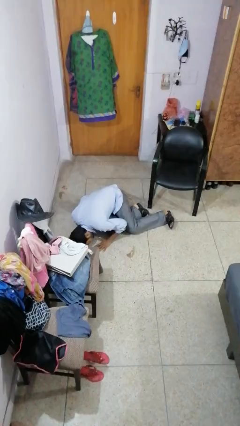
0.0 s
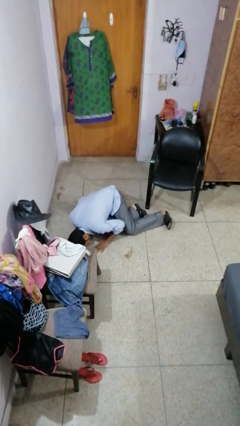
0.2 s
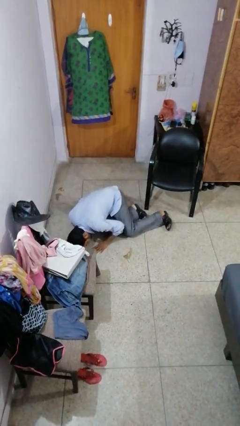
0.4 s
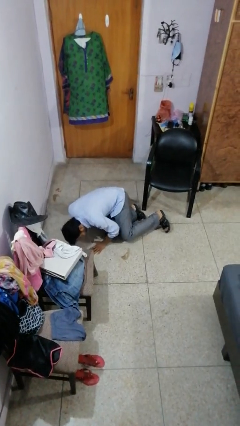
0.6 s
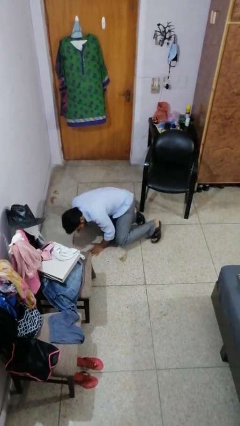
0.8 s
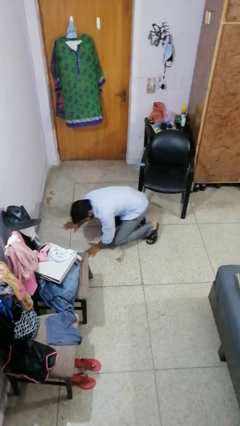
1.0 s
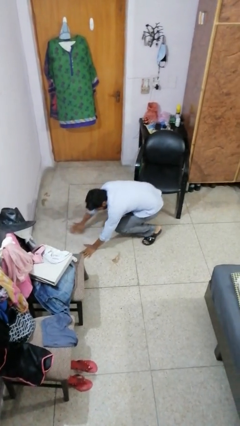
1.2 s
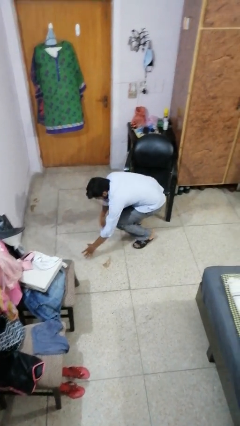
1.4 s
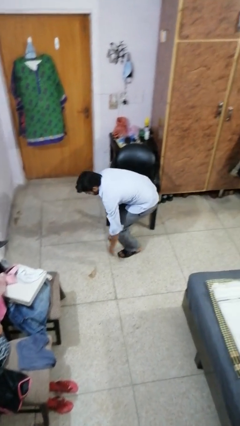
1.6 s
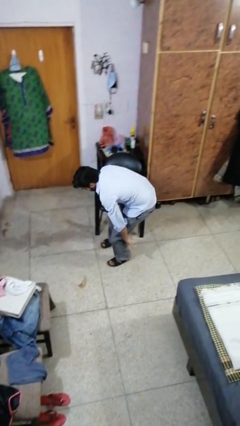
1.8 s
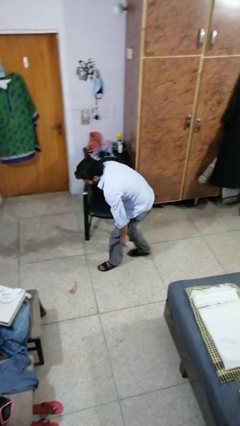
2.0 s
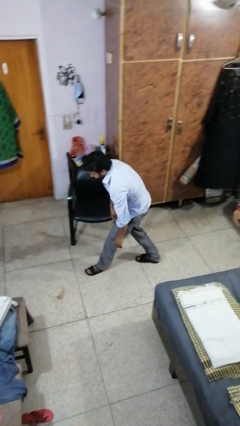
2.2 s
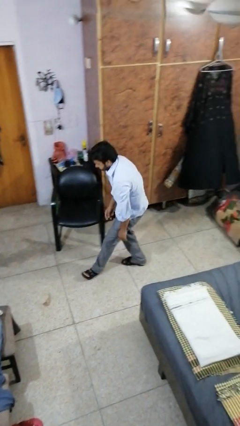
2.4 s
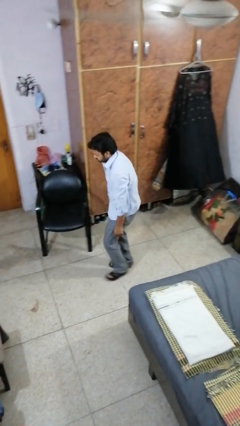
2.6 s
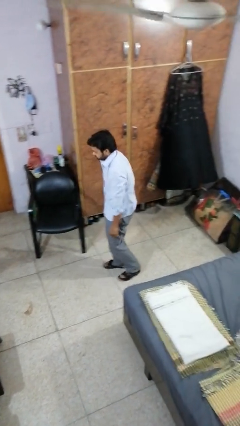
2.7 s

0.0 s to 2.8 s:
person stands up from floor

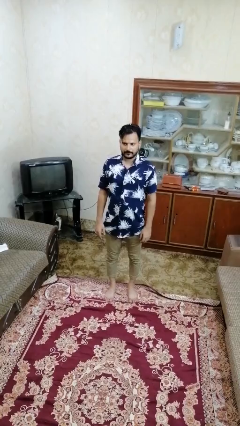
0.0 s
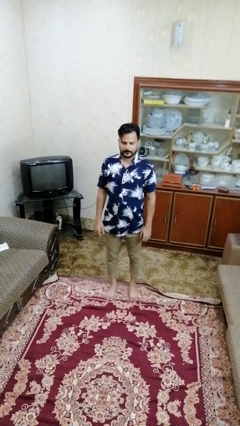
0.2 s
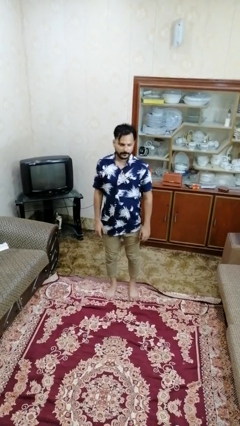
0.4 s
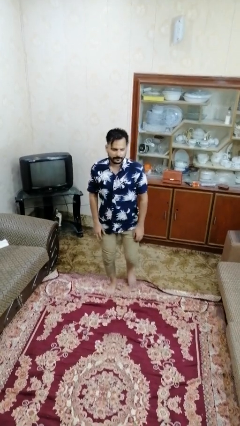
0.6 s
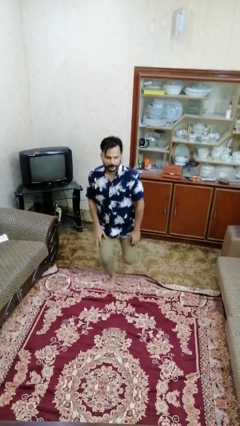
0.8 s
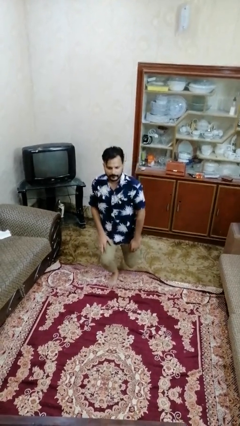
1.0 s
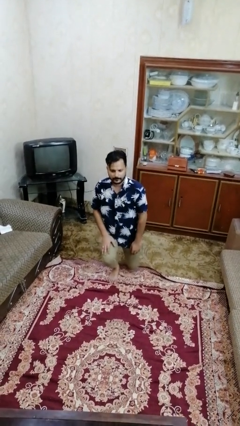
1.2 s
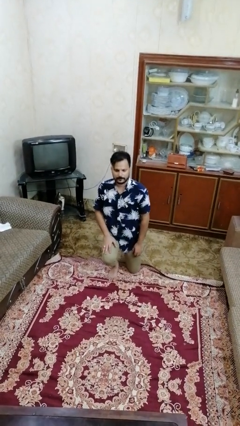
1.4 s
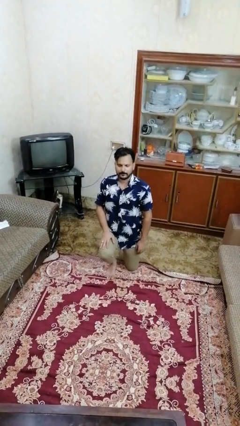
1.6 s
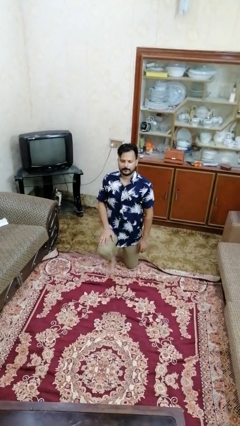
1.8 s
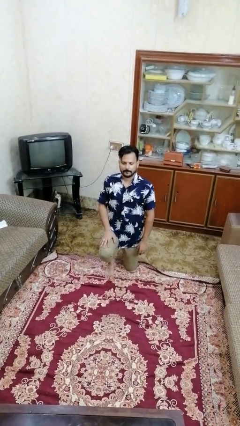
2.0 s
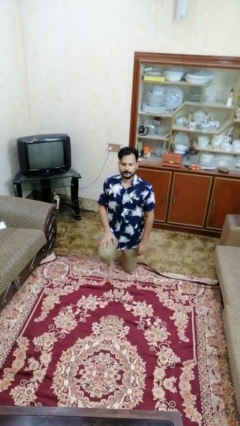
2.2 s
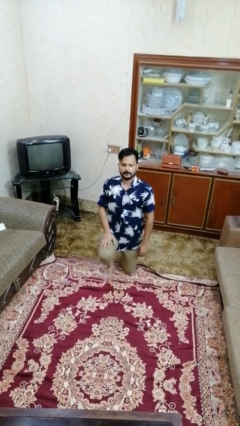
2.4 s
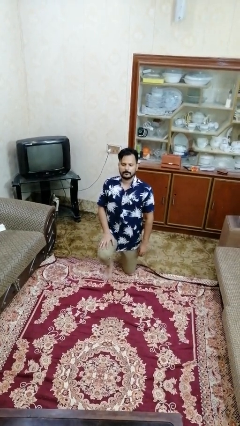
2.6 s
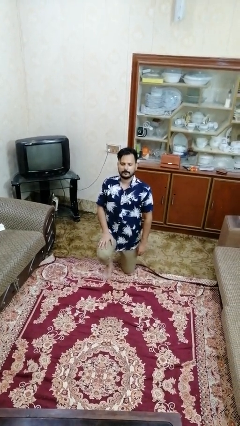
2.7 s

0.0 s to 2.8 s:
person kneels

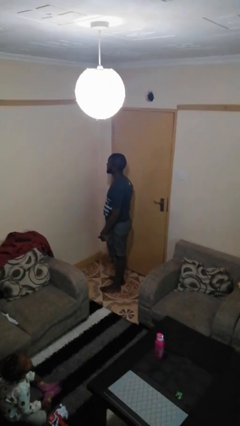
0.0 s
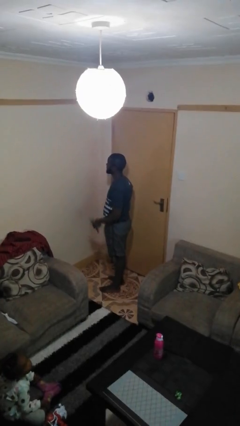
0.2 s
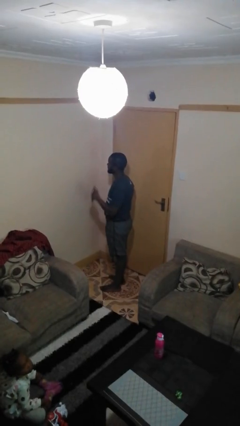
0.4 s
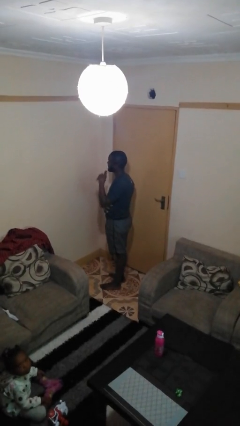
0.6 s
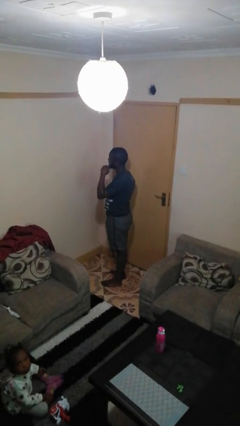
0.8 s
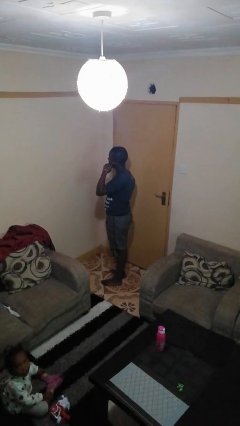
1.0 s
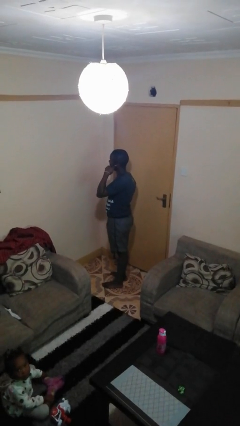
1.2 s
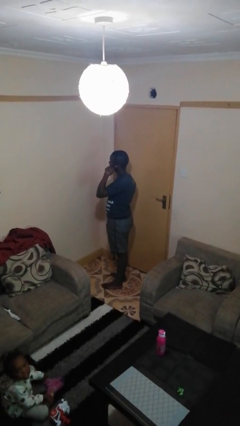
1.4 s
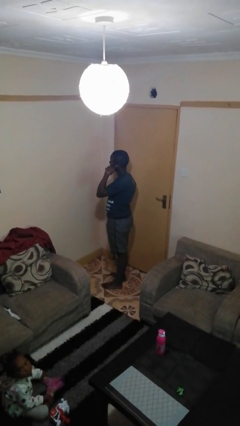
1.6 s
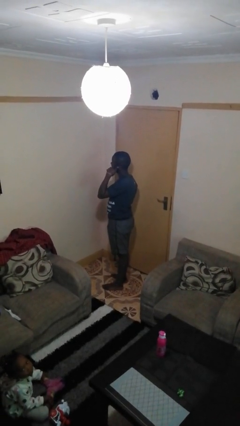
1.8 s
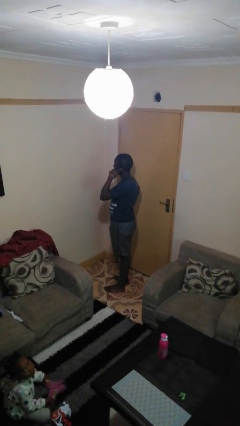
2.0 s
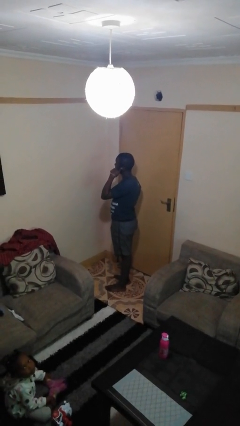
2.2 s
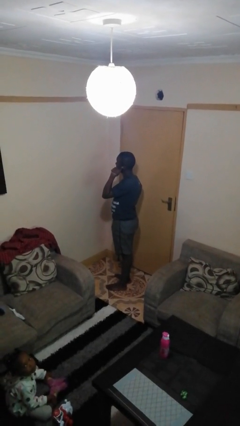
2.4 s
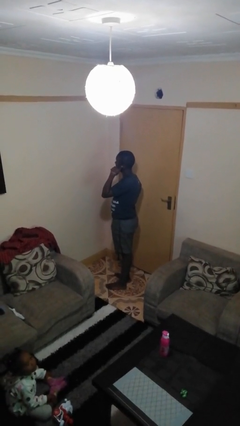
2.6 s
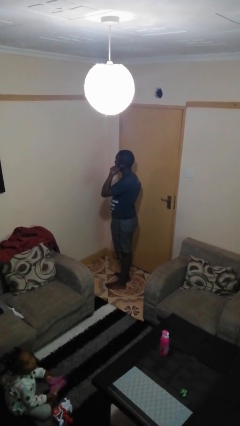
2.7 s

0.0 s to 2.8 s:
person gestures call me

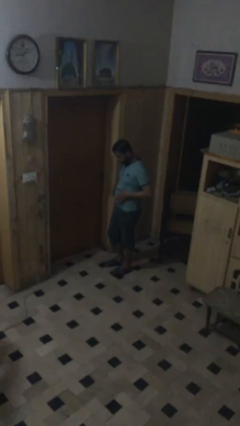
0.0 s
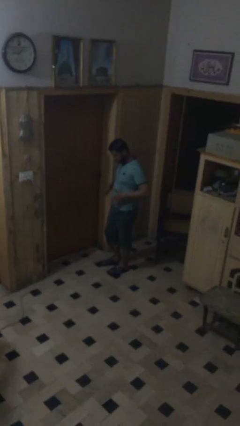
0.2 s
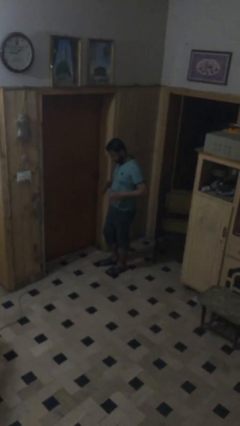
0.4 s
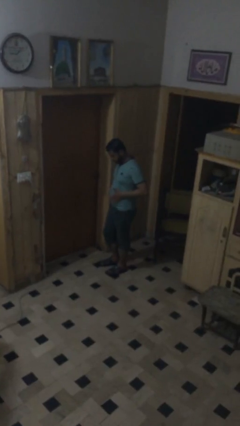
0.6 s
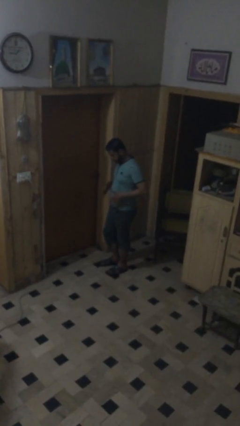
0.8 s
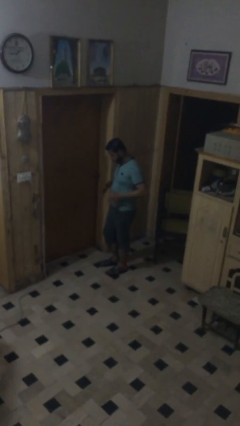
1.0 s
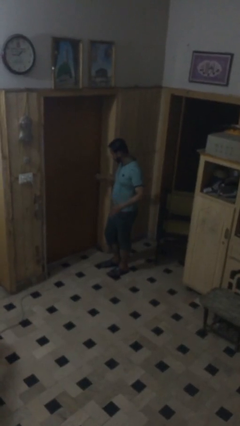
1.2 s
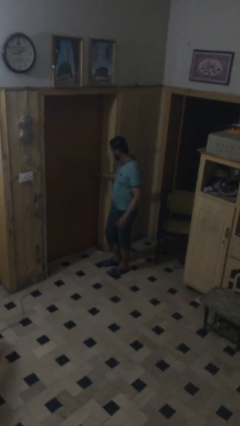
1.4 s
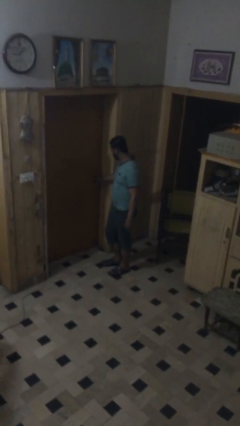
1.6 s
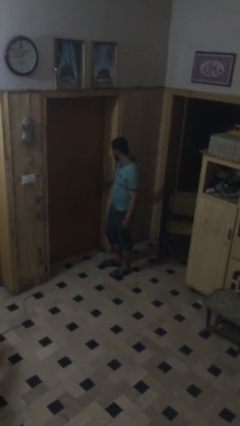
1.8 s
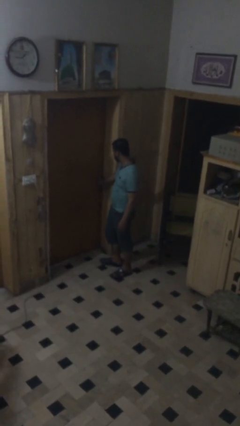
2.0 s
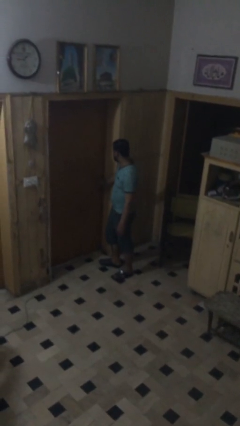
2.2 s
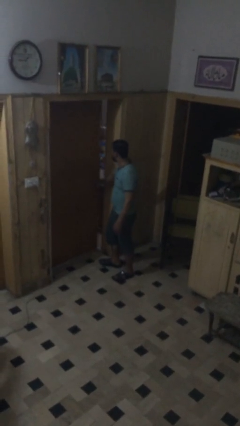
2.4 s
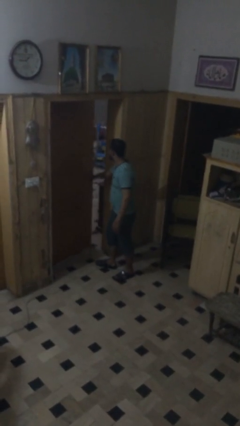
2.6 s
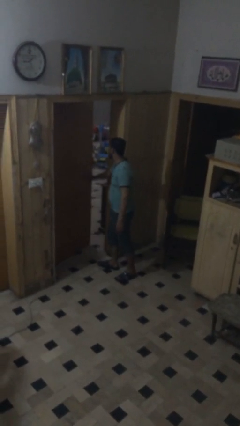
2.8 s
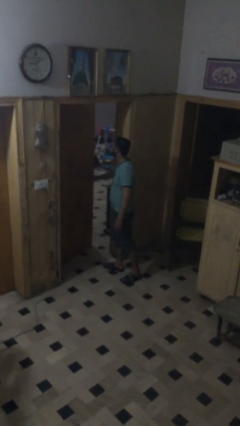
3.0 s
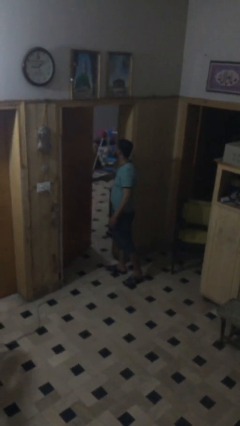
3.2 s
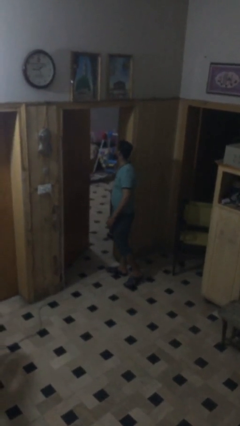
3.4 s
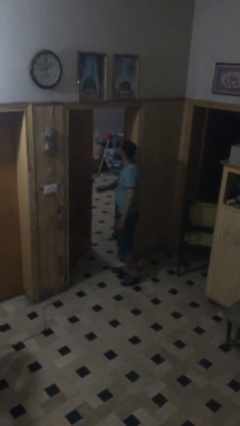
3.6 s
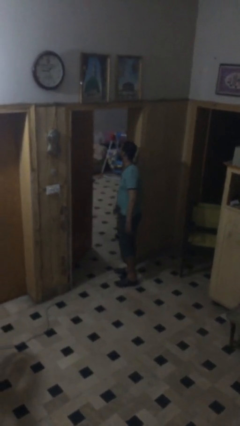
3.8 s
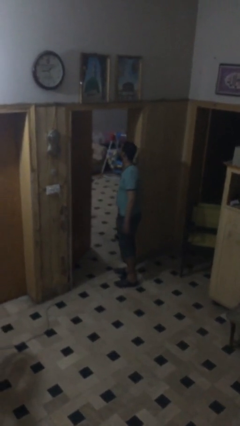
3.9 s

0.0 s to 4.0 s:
person opens facility door

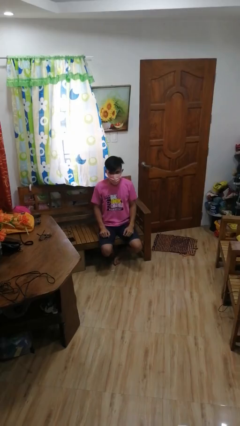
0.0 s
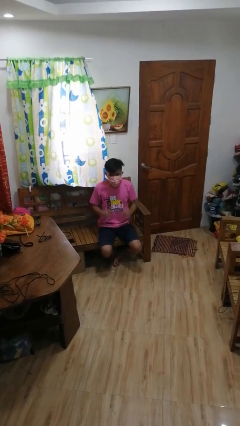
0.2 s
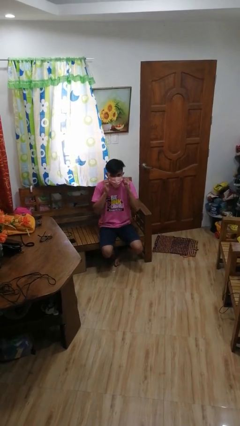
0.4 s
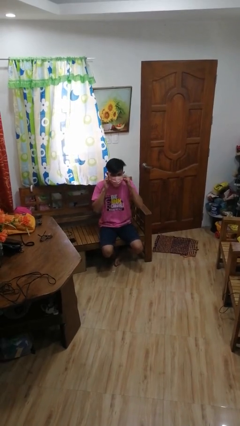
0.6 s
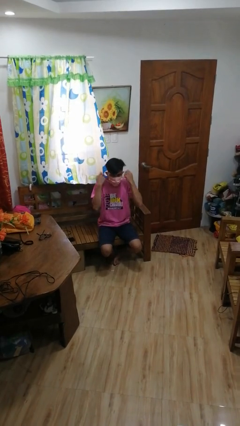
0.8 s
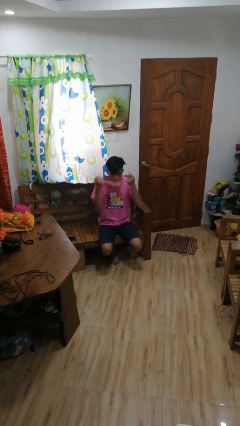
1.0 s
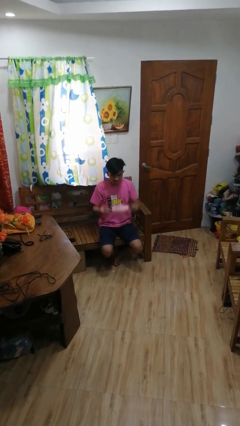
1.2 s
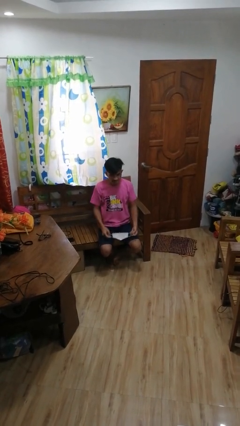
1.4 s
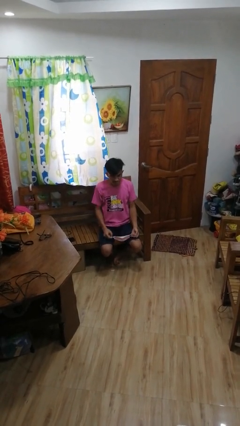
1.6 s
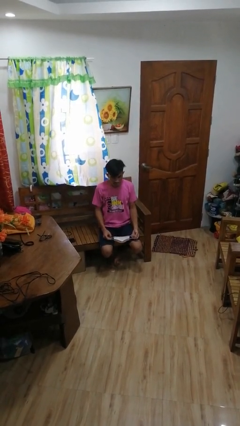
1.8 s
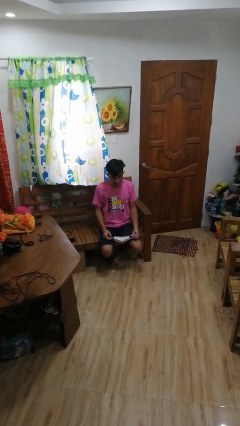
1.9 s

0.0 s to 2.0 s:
person takes off facemask

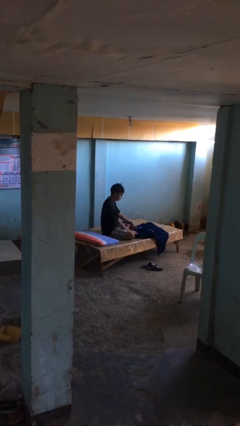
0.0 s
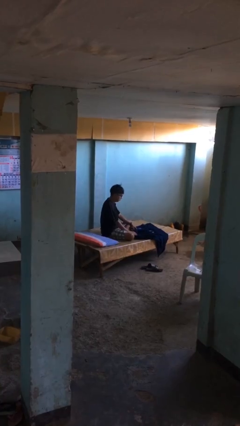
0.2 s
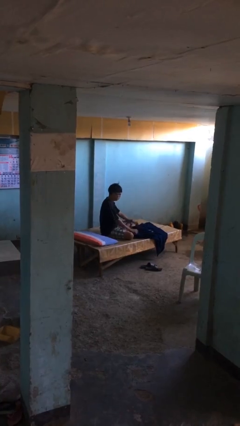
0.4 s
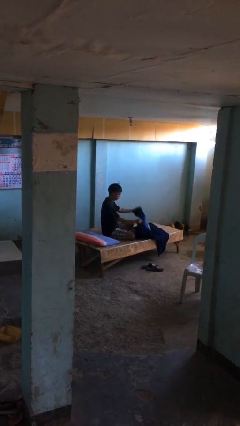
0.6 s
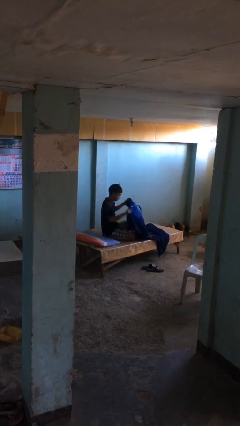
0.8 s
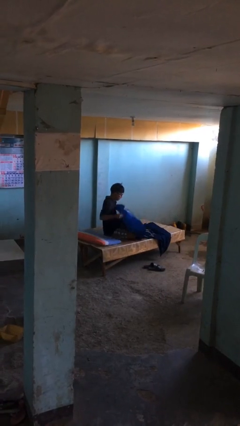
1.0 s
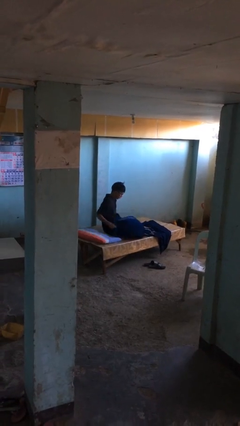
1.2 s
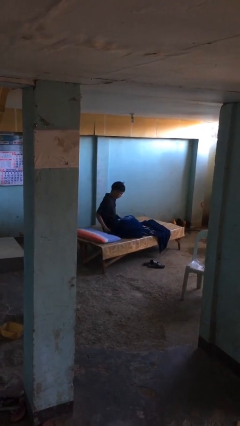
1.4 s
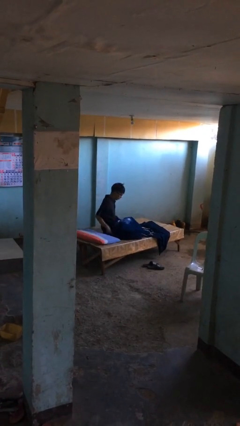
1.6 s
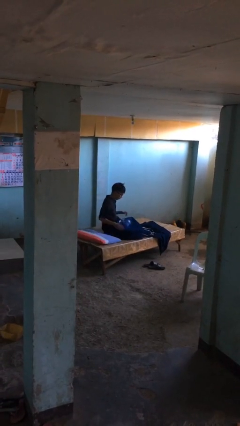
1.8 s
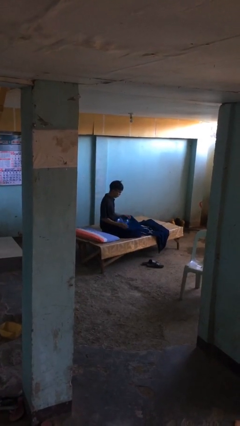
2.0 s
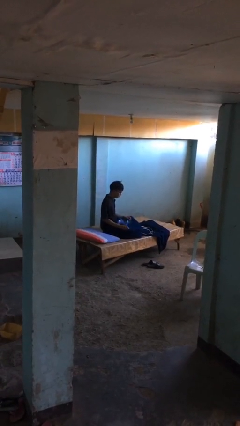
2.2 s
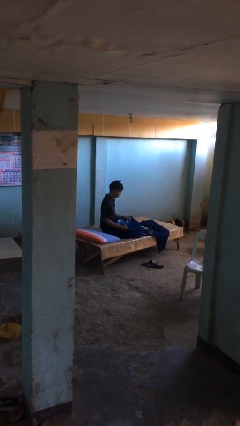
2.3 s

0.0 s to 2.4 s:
person covers with blanket

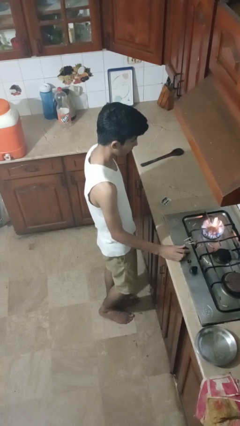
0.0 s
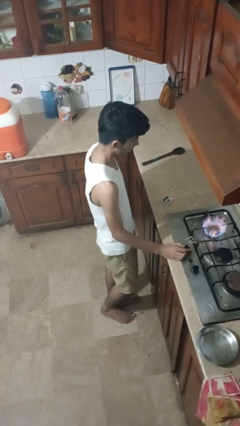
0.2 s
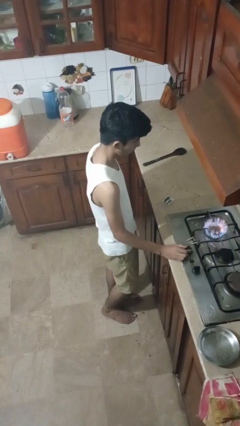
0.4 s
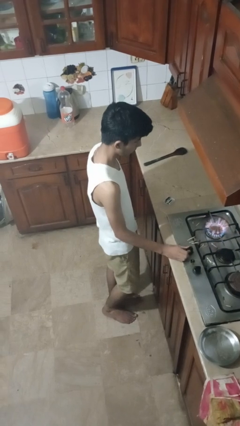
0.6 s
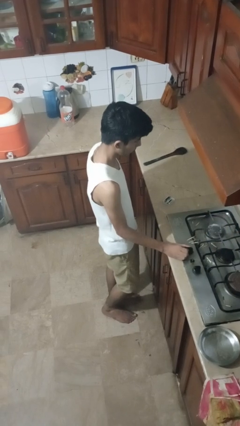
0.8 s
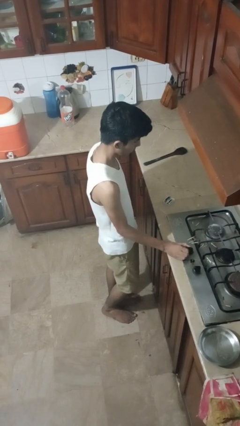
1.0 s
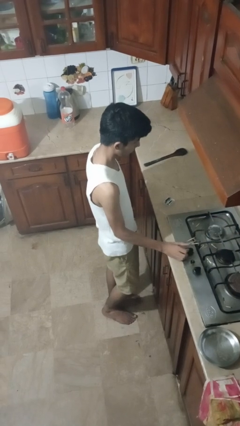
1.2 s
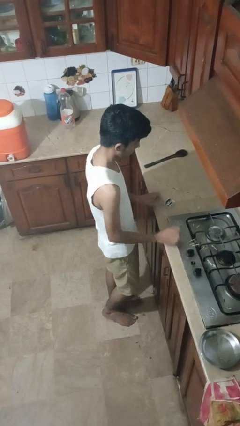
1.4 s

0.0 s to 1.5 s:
person turns off stovetop
